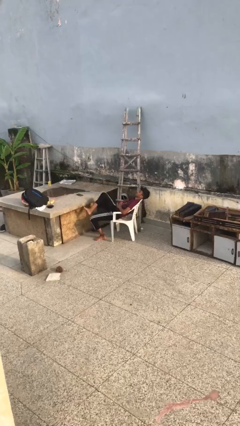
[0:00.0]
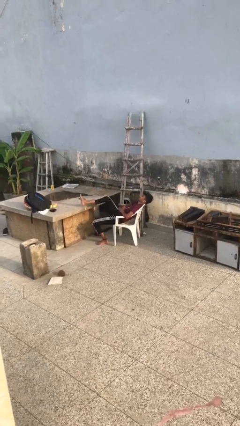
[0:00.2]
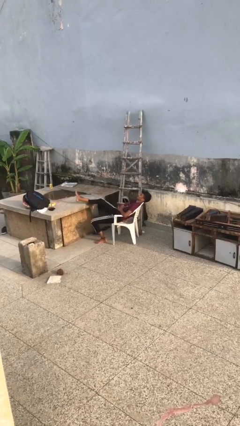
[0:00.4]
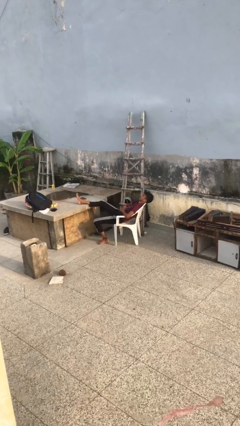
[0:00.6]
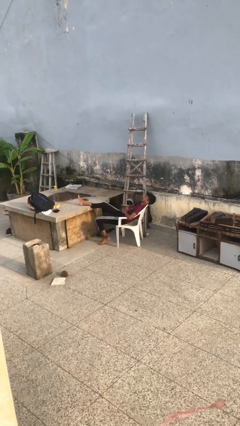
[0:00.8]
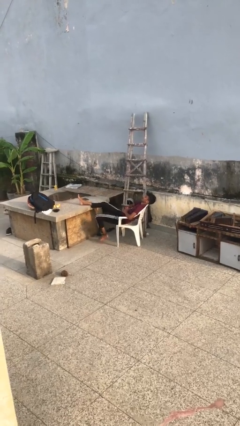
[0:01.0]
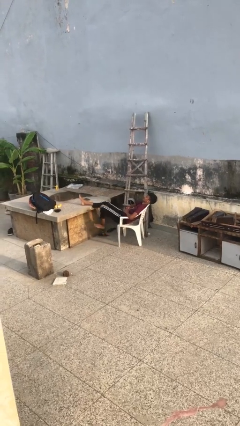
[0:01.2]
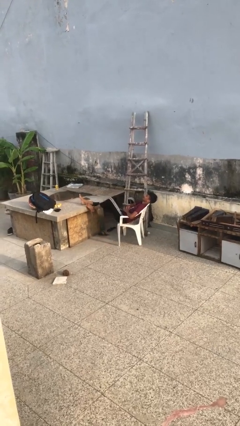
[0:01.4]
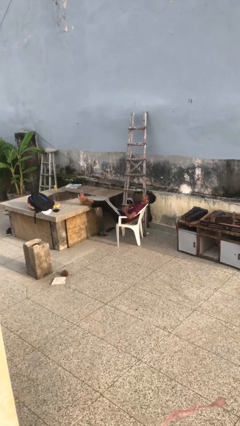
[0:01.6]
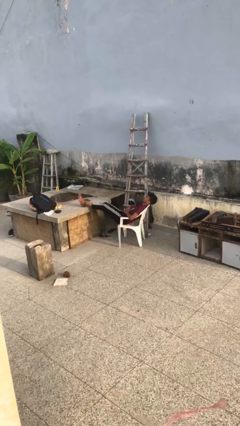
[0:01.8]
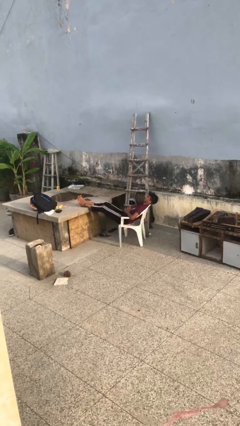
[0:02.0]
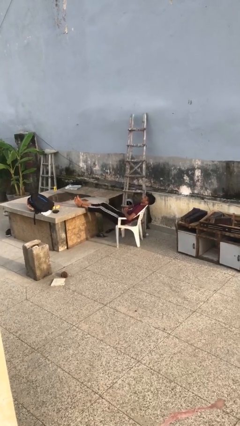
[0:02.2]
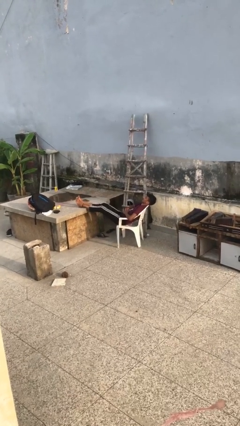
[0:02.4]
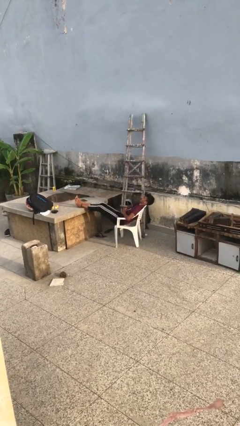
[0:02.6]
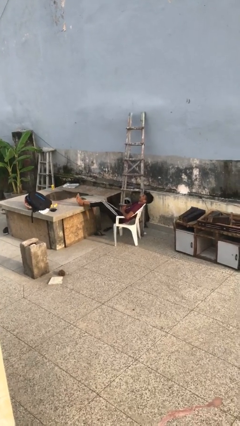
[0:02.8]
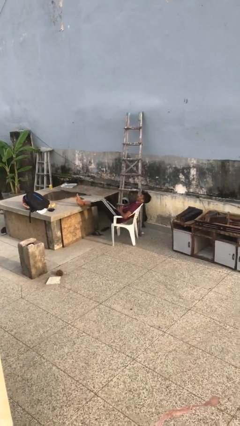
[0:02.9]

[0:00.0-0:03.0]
person puts feet up

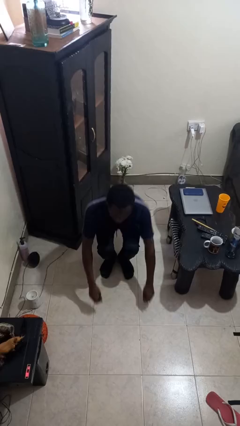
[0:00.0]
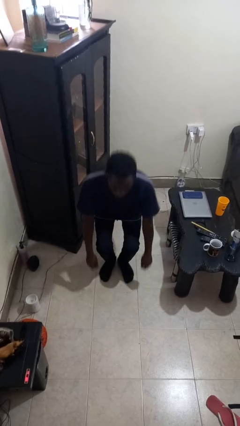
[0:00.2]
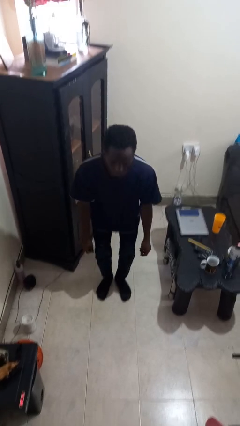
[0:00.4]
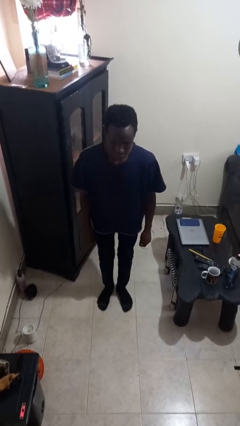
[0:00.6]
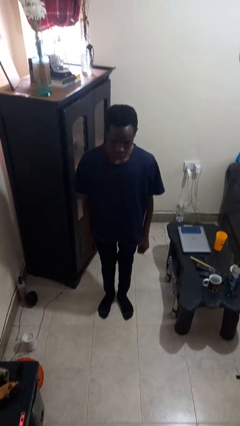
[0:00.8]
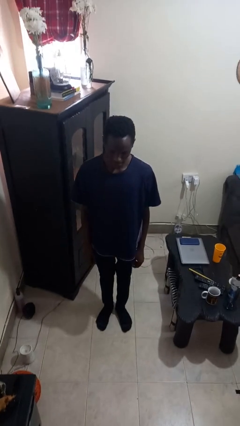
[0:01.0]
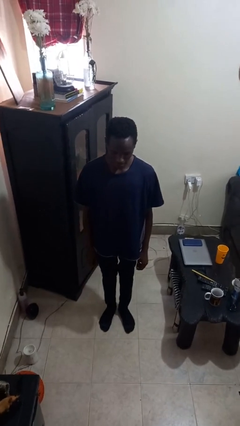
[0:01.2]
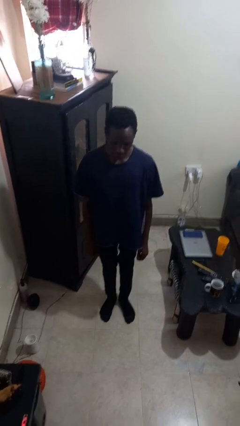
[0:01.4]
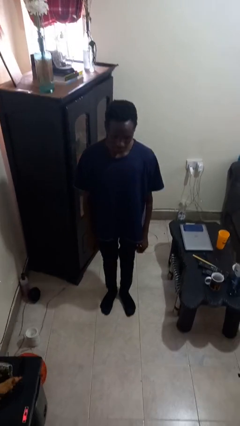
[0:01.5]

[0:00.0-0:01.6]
person stands up

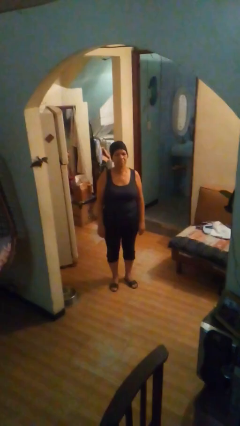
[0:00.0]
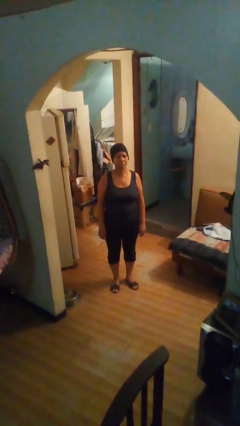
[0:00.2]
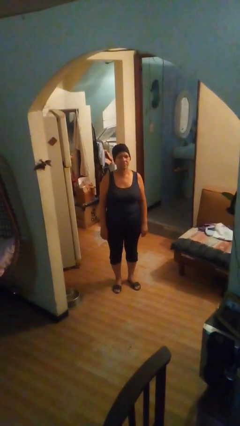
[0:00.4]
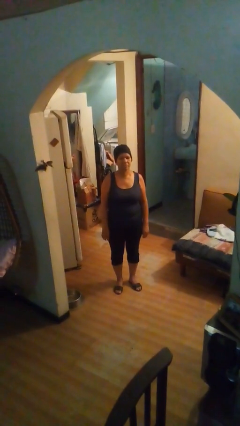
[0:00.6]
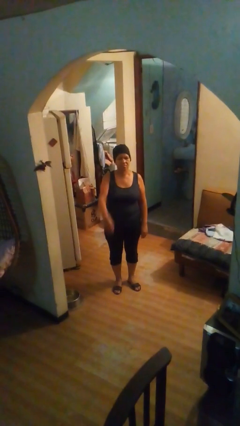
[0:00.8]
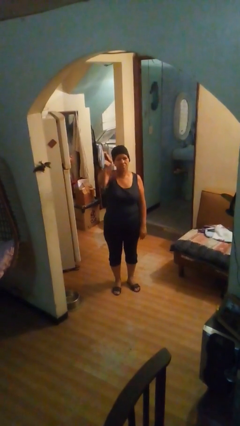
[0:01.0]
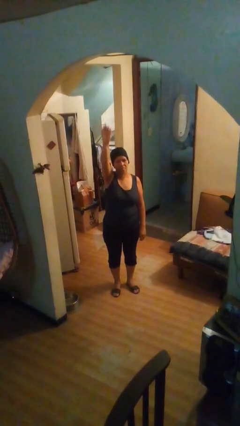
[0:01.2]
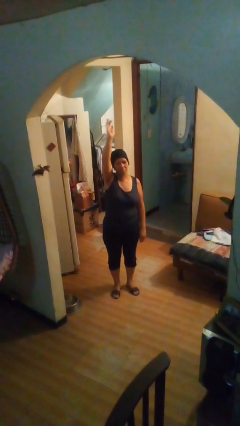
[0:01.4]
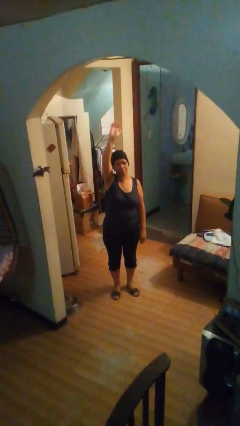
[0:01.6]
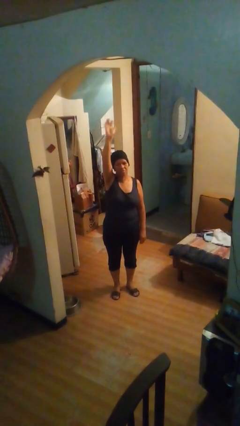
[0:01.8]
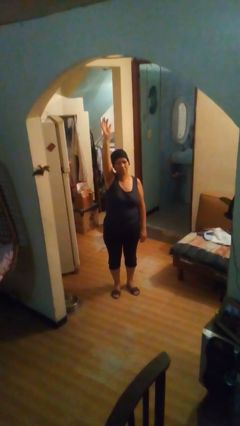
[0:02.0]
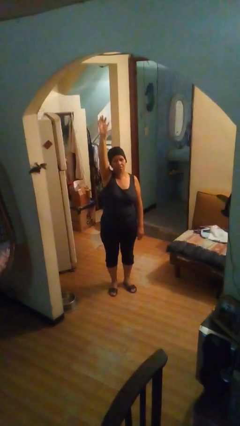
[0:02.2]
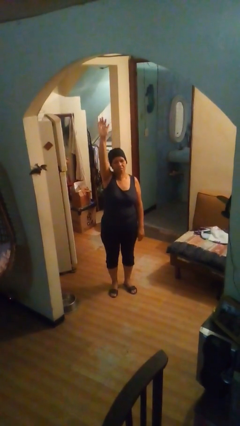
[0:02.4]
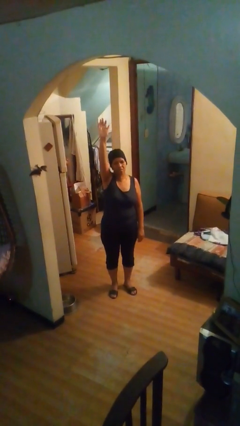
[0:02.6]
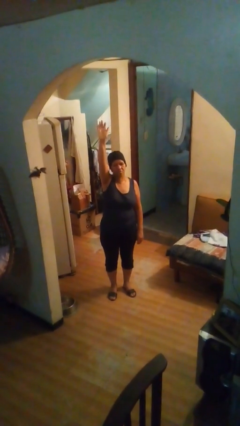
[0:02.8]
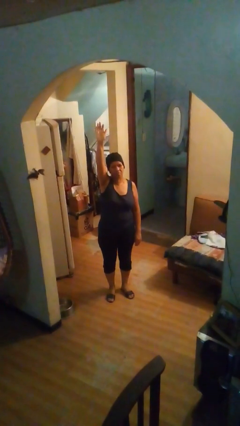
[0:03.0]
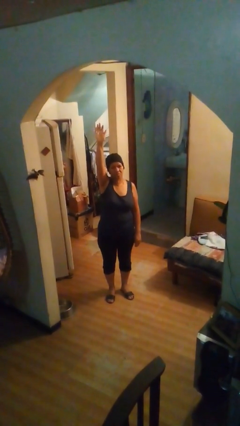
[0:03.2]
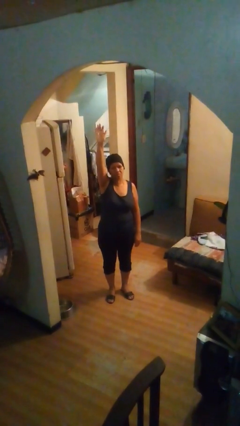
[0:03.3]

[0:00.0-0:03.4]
person gestures raise hand

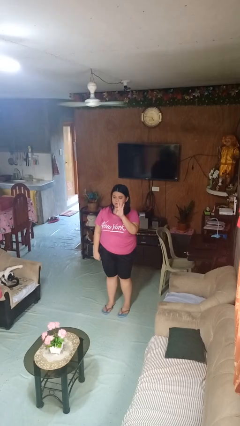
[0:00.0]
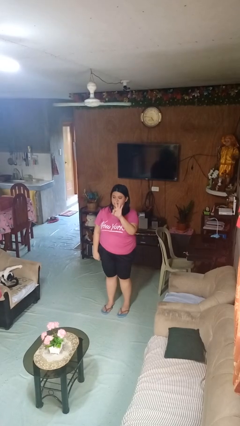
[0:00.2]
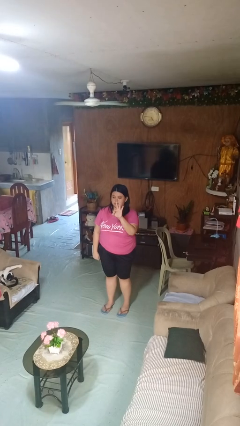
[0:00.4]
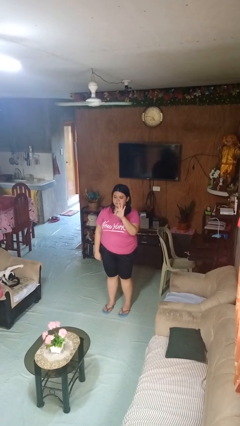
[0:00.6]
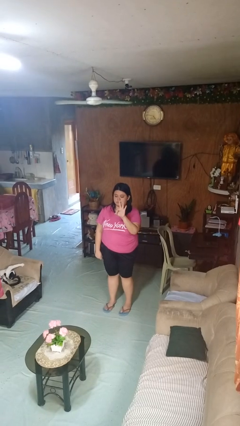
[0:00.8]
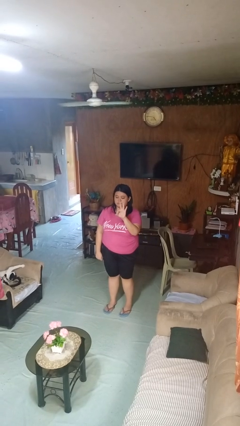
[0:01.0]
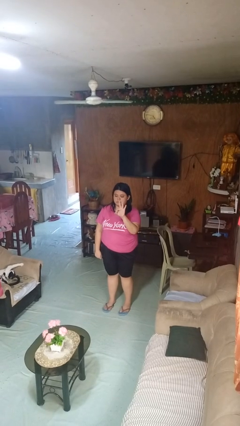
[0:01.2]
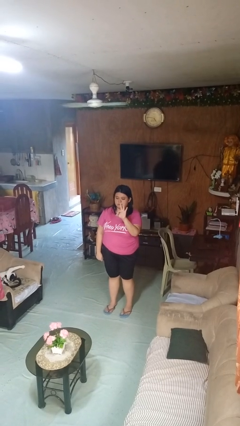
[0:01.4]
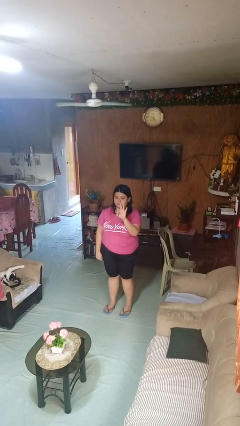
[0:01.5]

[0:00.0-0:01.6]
person gestures number three

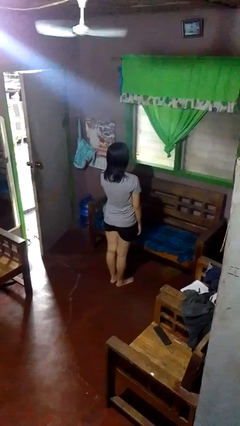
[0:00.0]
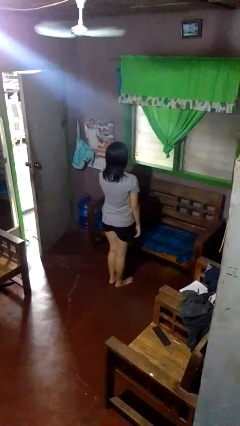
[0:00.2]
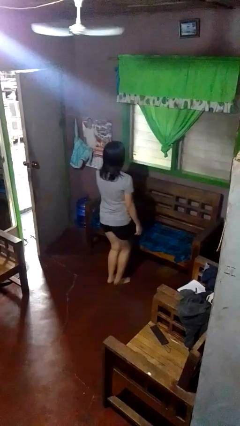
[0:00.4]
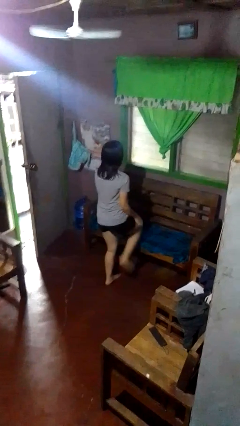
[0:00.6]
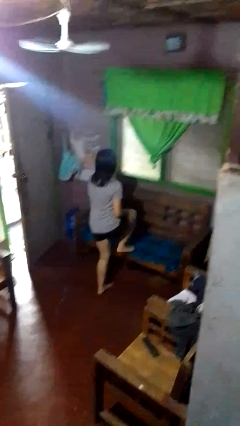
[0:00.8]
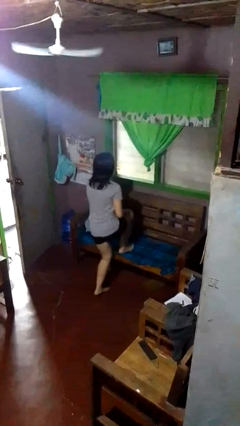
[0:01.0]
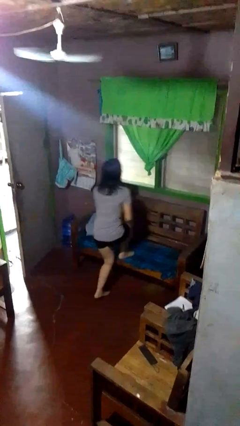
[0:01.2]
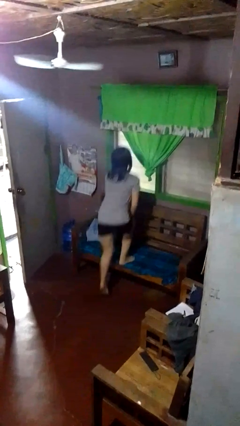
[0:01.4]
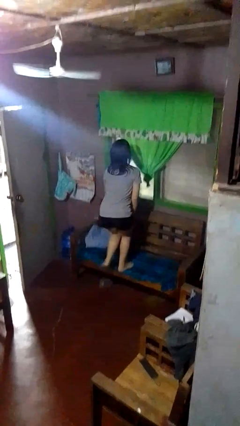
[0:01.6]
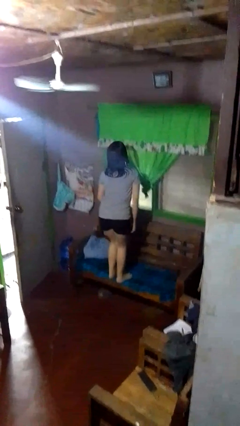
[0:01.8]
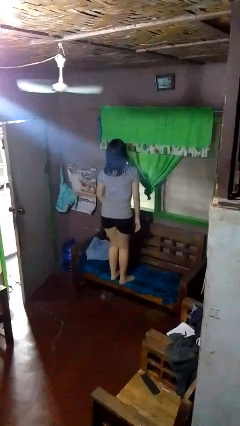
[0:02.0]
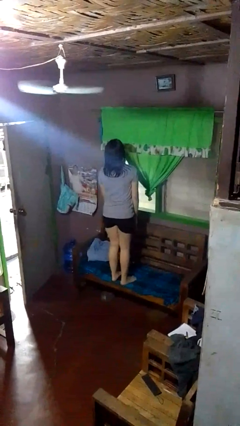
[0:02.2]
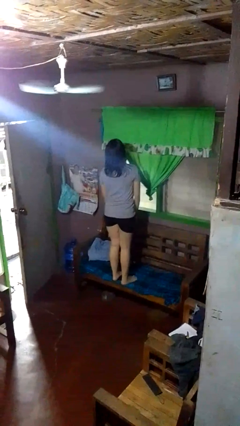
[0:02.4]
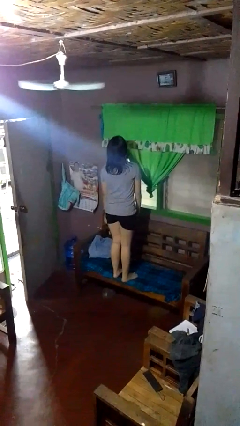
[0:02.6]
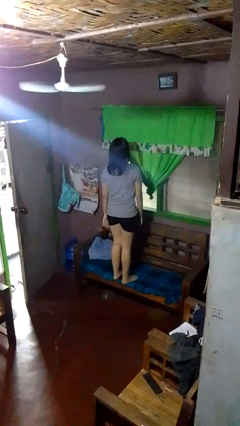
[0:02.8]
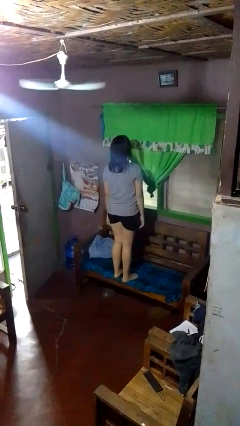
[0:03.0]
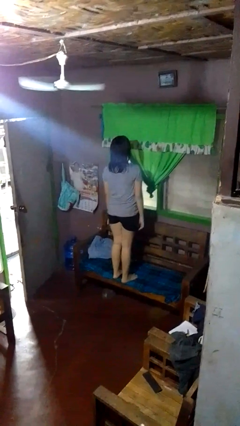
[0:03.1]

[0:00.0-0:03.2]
person climbs on couch

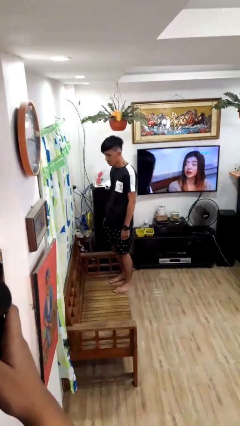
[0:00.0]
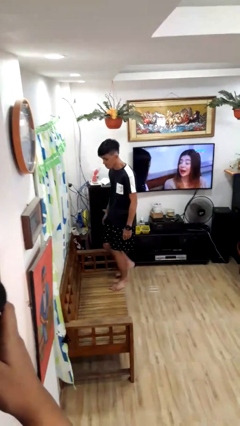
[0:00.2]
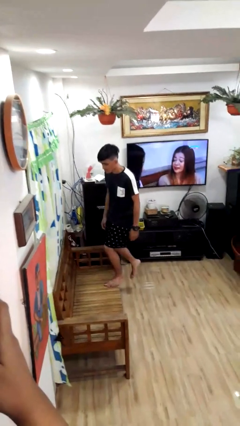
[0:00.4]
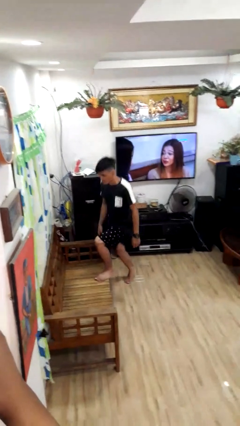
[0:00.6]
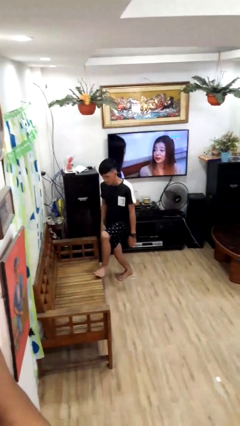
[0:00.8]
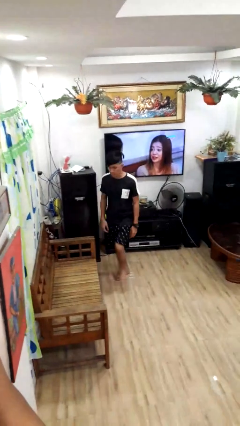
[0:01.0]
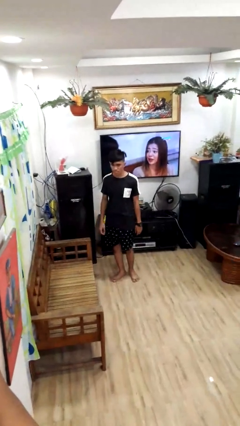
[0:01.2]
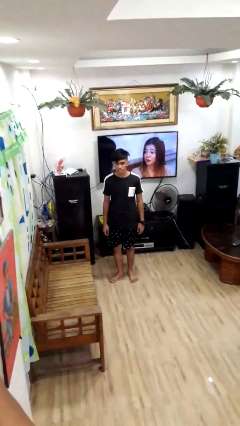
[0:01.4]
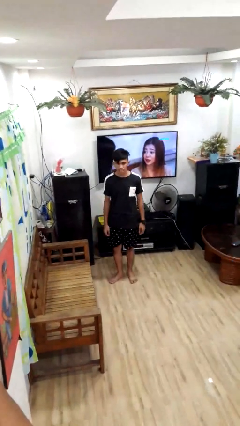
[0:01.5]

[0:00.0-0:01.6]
person climbs off couch

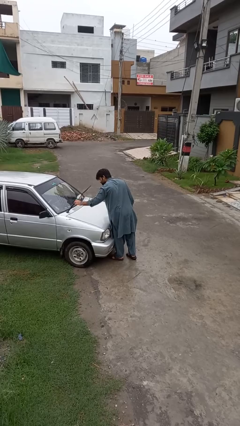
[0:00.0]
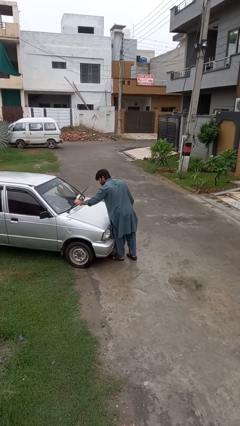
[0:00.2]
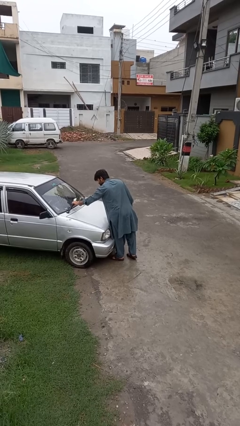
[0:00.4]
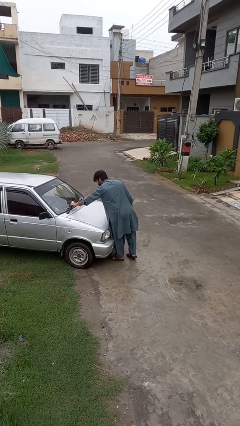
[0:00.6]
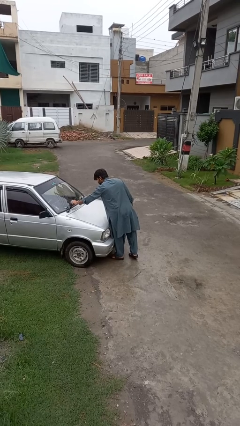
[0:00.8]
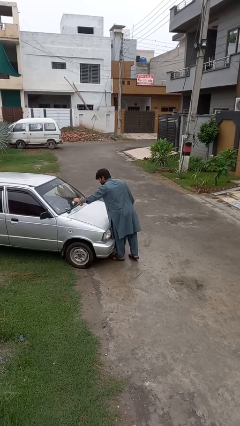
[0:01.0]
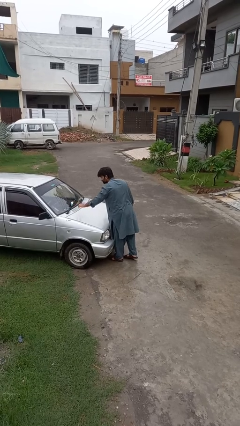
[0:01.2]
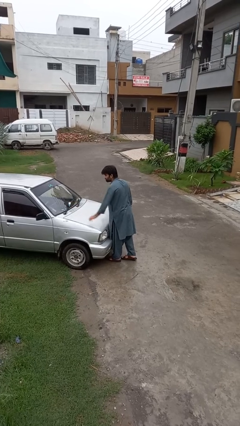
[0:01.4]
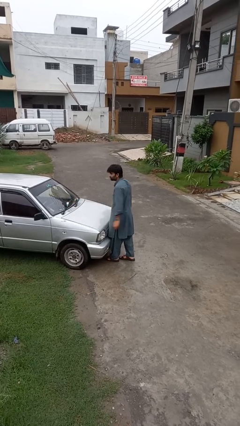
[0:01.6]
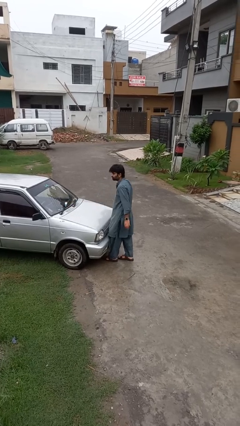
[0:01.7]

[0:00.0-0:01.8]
person flips down car wipers

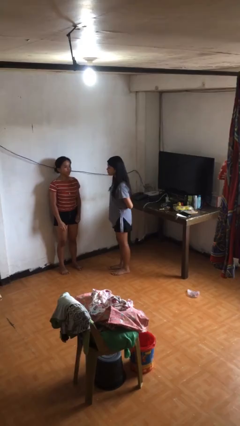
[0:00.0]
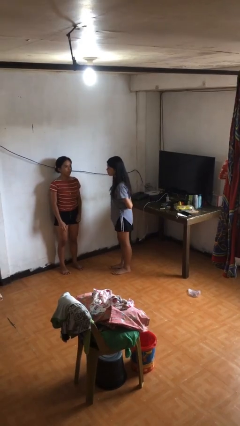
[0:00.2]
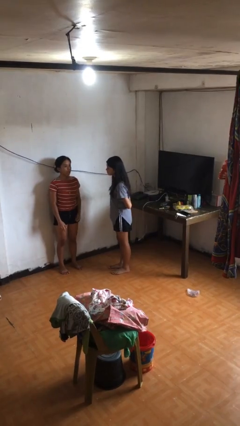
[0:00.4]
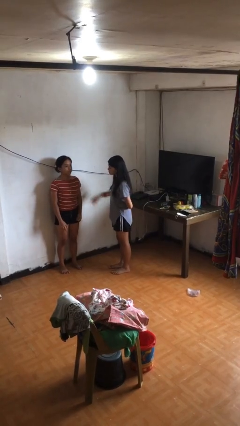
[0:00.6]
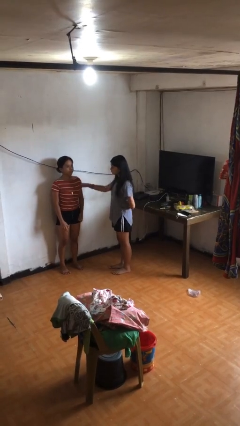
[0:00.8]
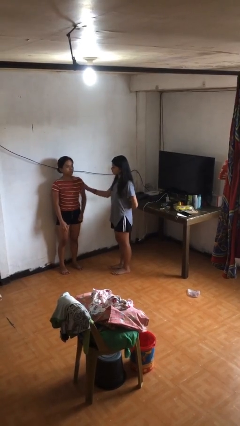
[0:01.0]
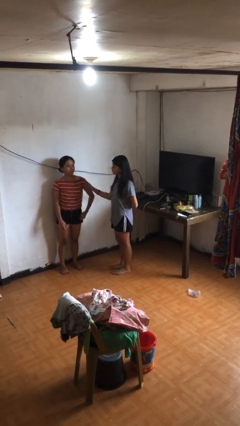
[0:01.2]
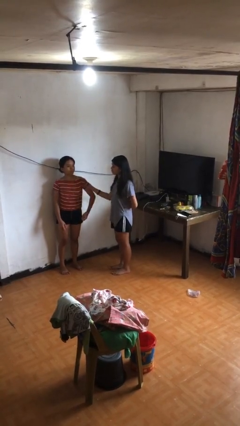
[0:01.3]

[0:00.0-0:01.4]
person grabs person by bicep
